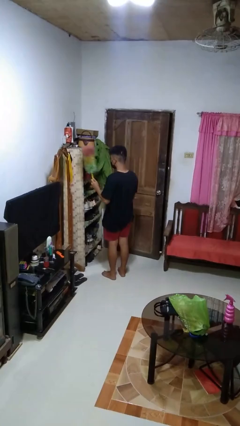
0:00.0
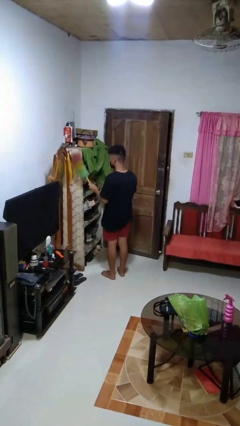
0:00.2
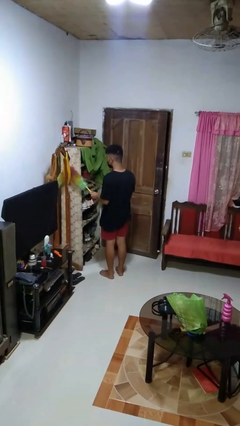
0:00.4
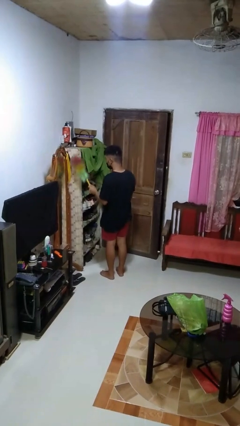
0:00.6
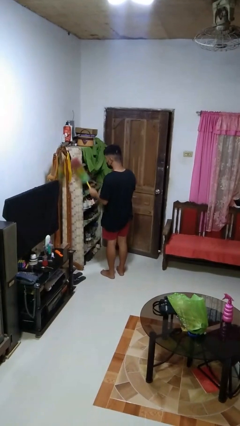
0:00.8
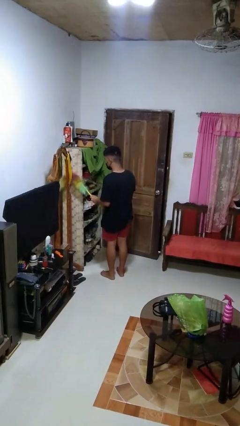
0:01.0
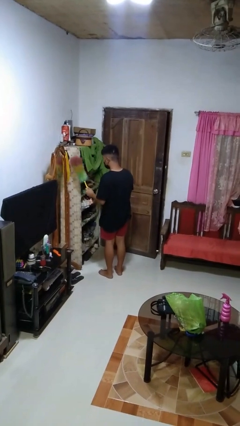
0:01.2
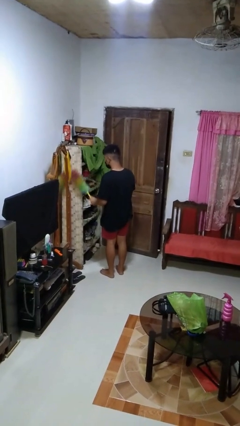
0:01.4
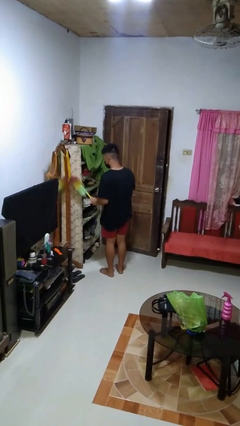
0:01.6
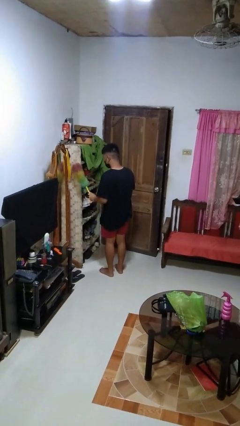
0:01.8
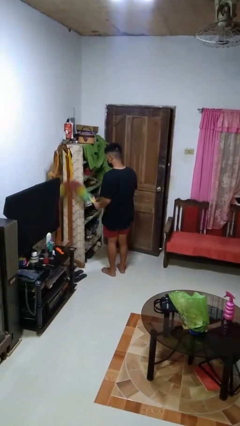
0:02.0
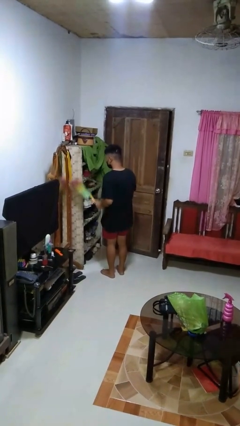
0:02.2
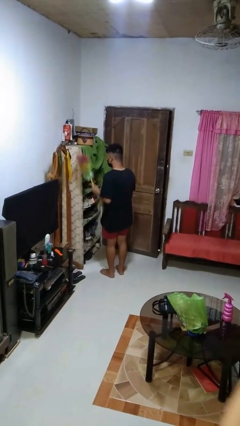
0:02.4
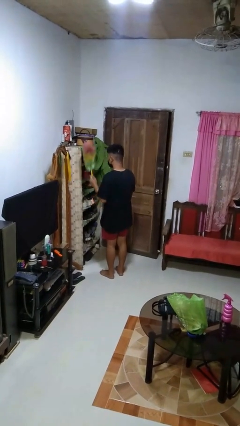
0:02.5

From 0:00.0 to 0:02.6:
person dusts furniture

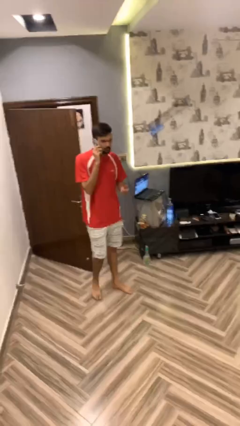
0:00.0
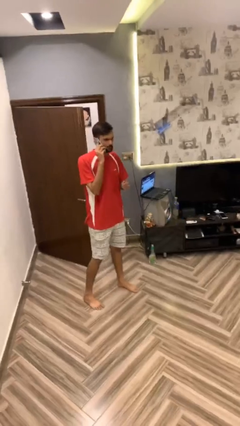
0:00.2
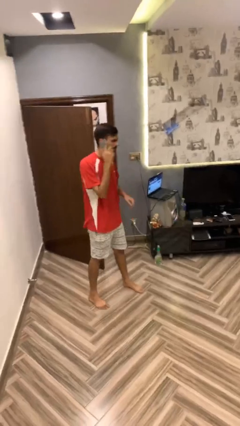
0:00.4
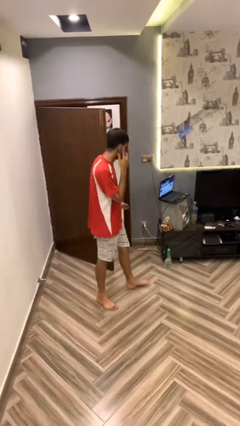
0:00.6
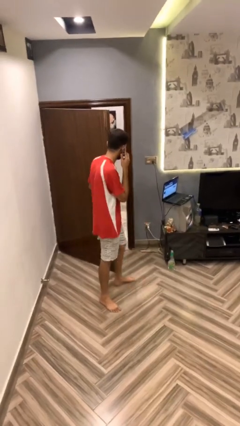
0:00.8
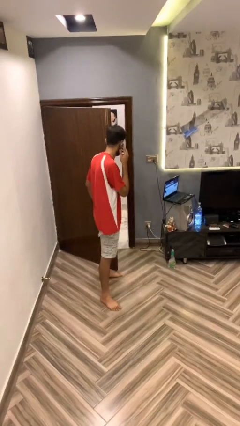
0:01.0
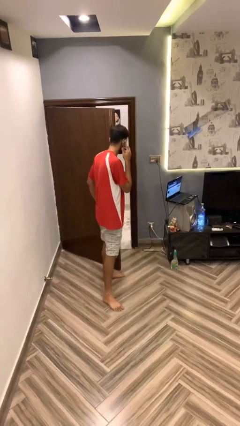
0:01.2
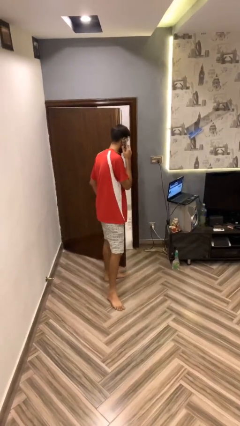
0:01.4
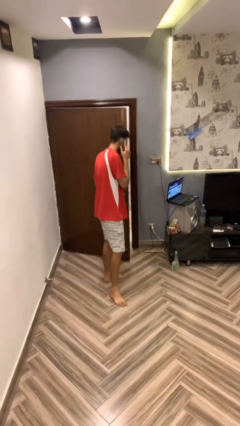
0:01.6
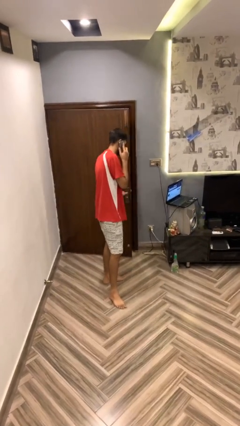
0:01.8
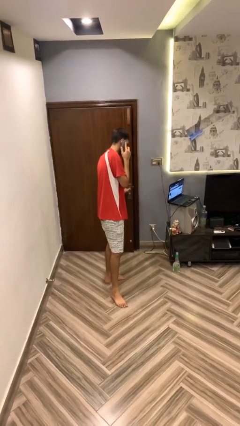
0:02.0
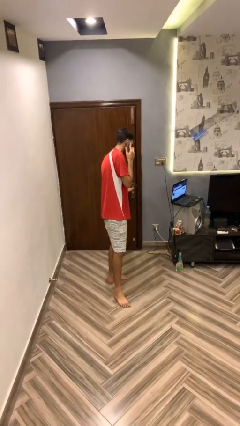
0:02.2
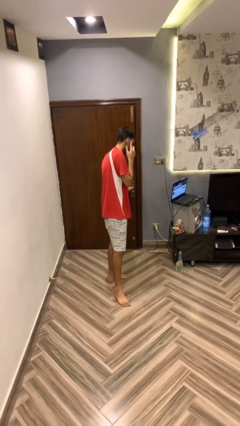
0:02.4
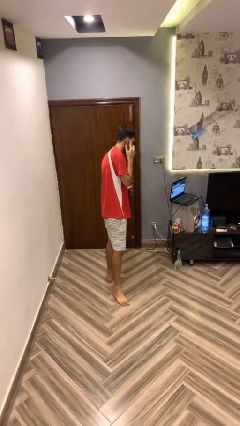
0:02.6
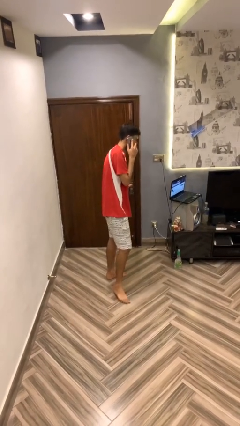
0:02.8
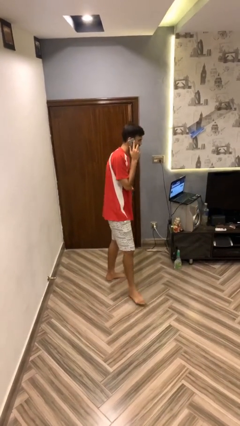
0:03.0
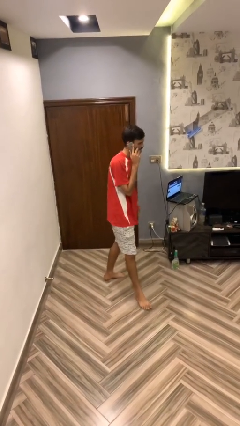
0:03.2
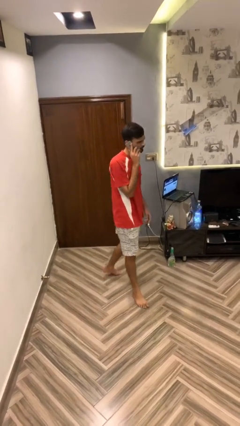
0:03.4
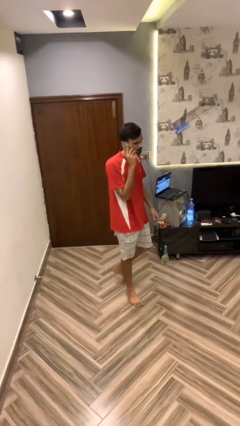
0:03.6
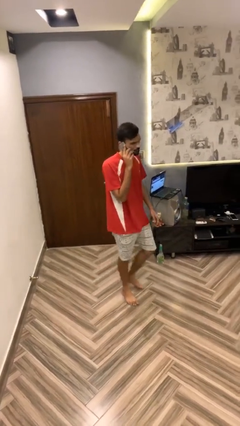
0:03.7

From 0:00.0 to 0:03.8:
person closes facility door

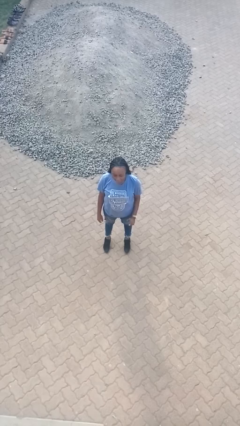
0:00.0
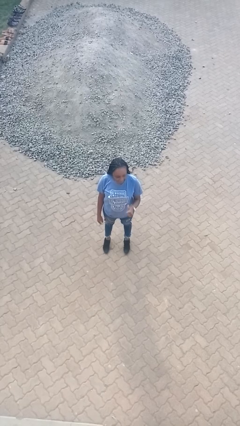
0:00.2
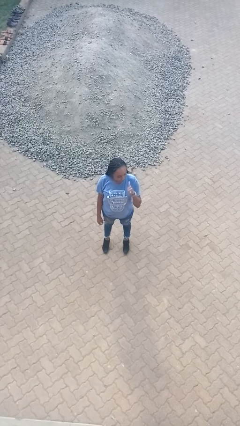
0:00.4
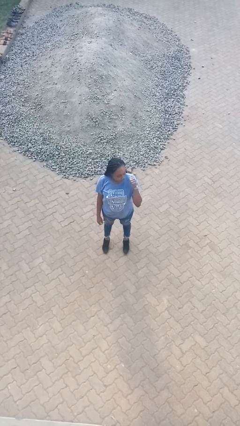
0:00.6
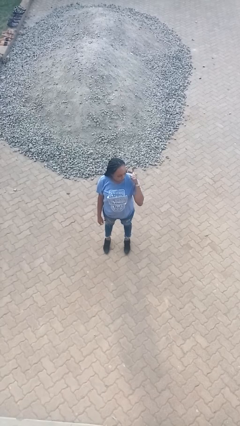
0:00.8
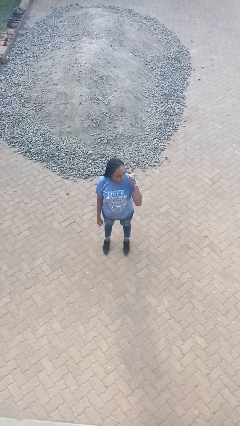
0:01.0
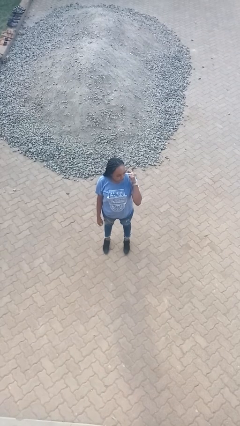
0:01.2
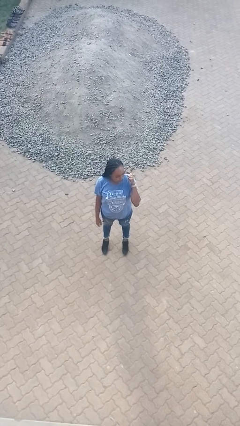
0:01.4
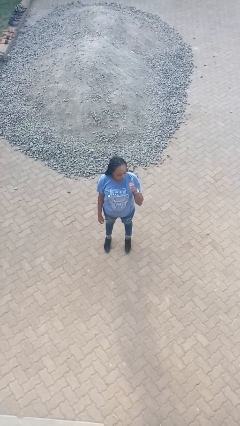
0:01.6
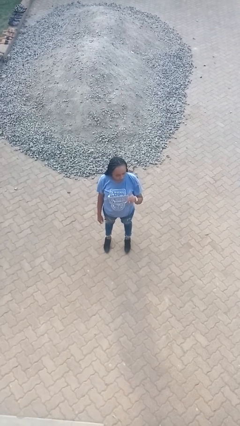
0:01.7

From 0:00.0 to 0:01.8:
person gestures behind me

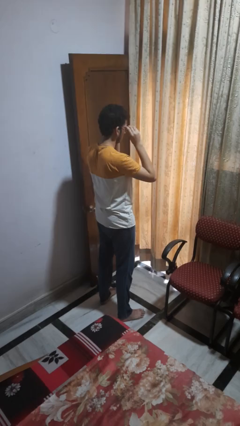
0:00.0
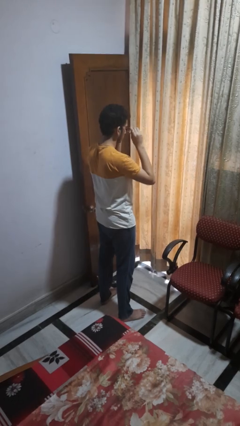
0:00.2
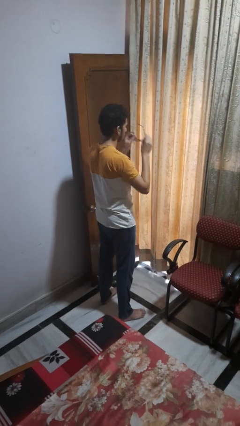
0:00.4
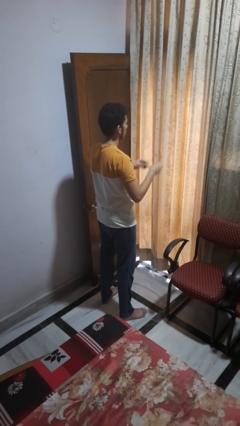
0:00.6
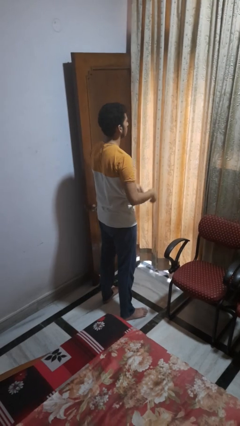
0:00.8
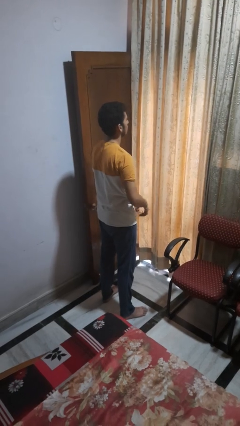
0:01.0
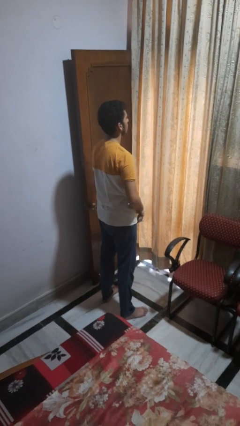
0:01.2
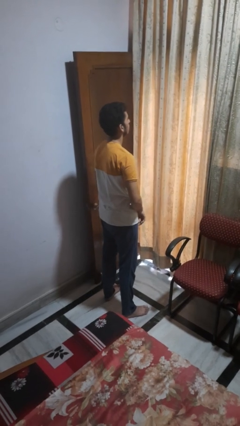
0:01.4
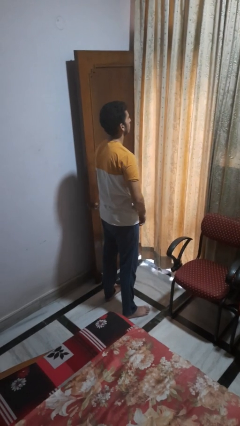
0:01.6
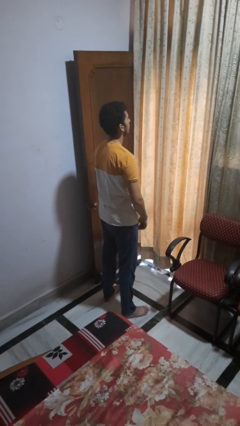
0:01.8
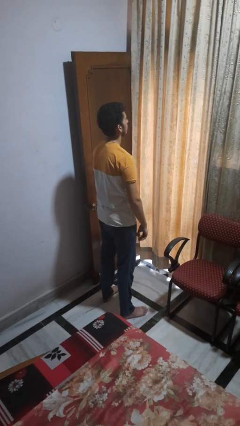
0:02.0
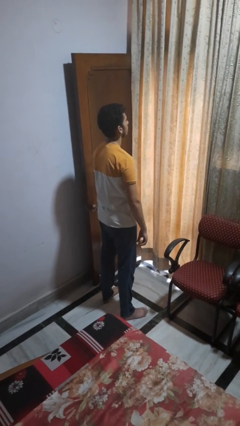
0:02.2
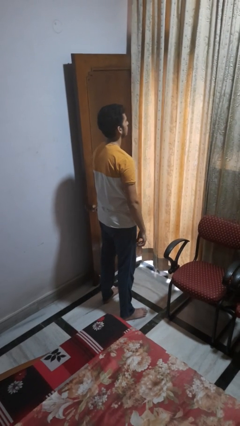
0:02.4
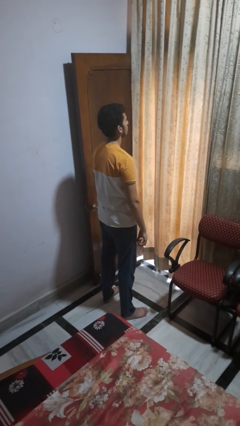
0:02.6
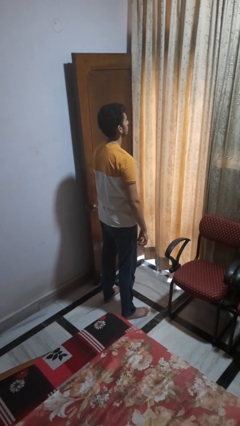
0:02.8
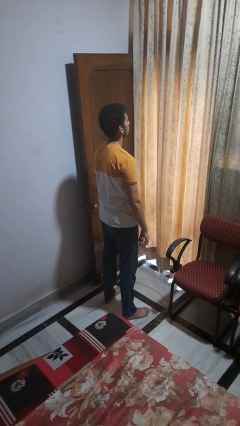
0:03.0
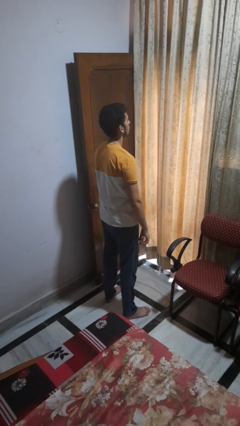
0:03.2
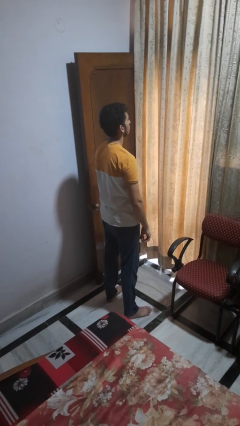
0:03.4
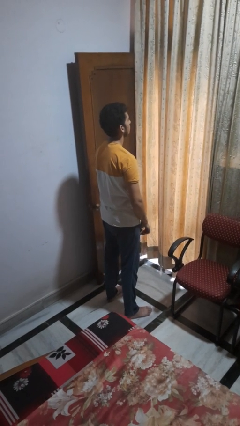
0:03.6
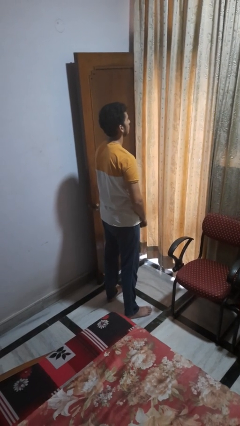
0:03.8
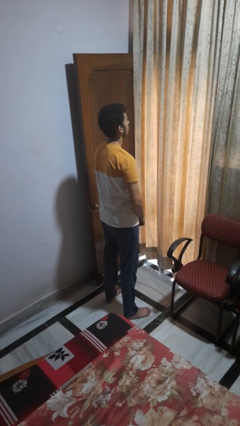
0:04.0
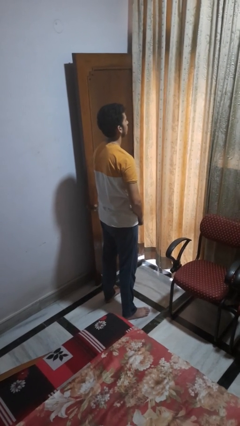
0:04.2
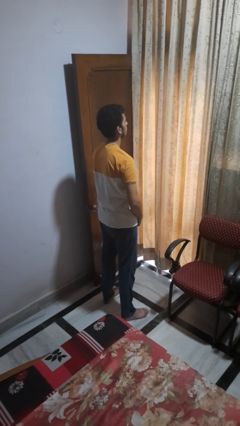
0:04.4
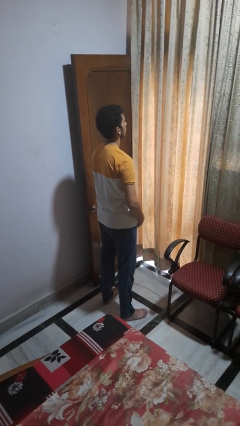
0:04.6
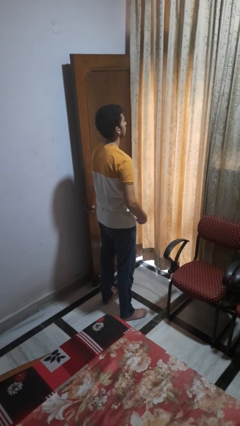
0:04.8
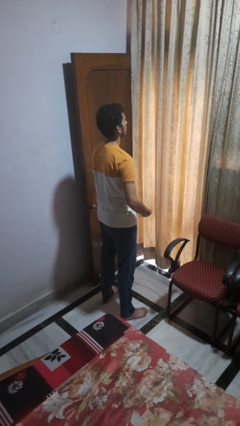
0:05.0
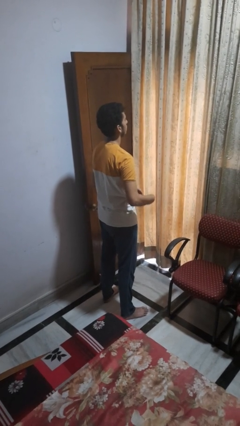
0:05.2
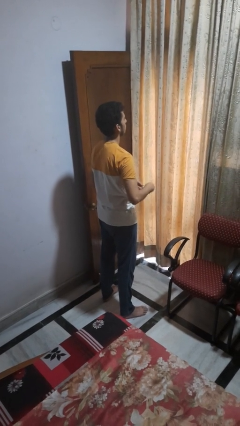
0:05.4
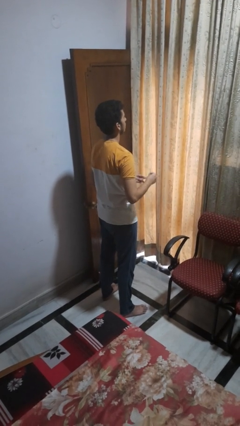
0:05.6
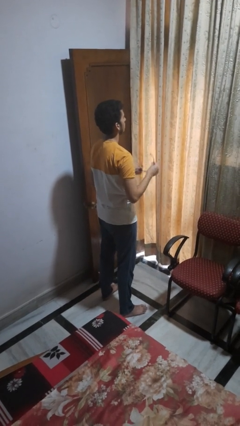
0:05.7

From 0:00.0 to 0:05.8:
person takes off glasses

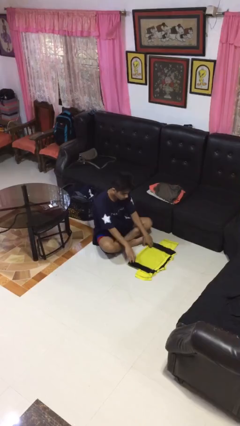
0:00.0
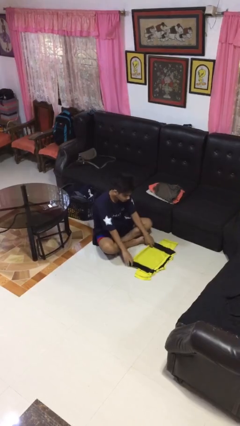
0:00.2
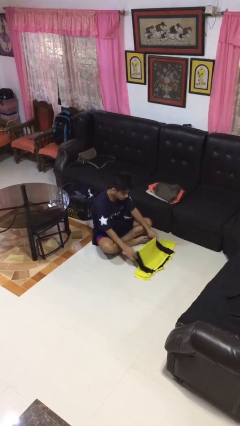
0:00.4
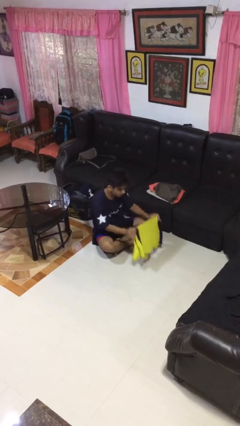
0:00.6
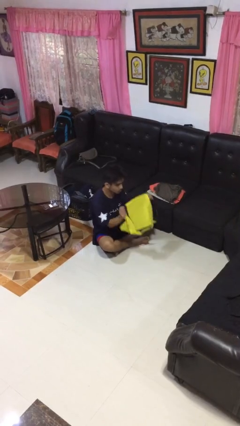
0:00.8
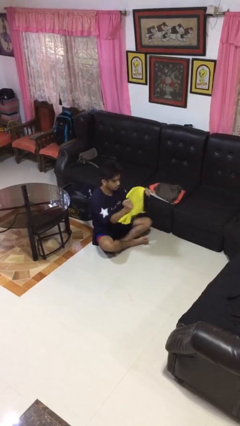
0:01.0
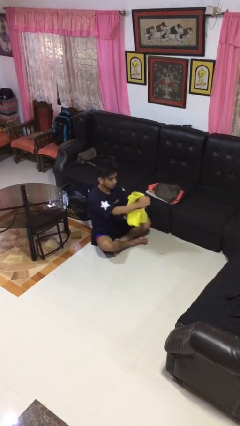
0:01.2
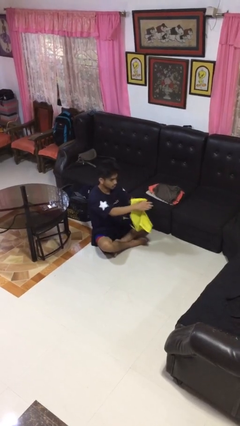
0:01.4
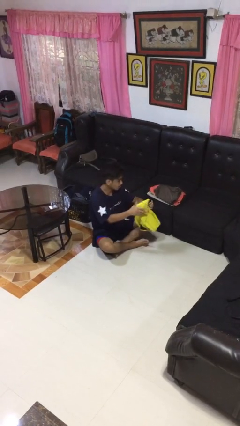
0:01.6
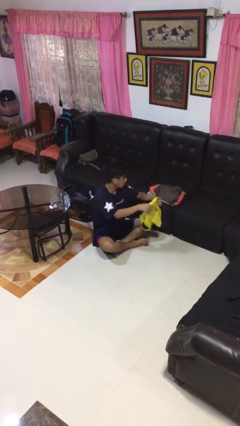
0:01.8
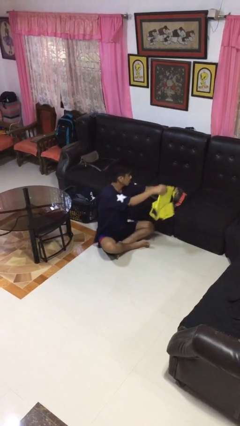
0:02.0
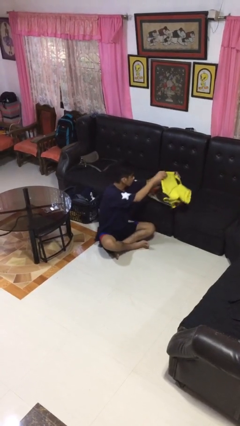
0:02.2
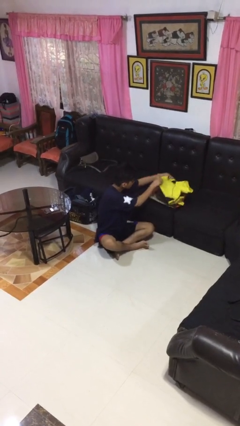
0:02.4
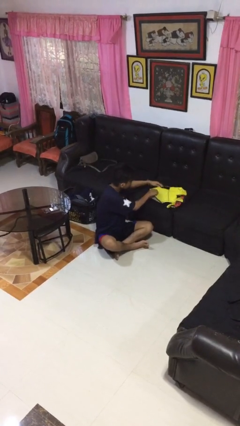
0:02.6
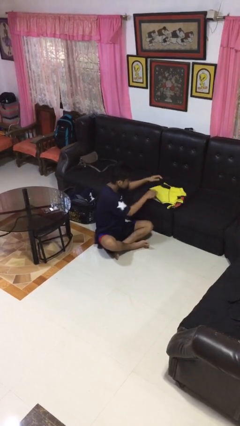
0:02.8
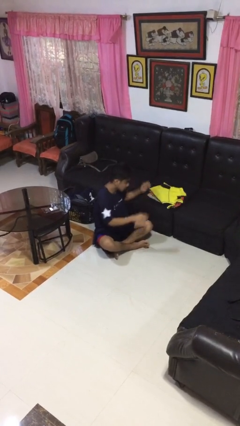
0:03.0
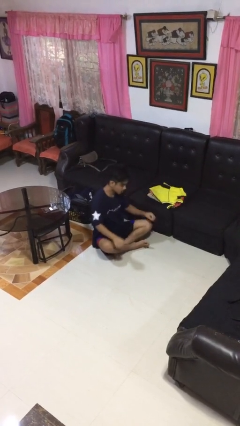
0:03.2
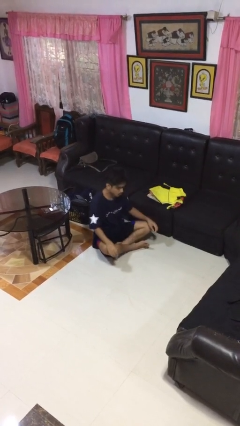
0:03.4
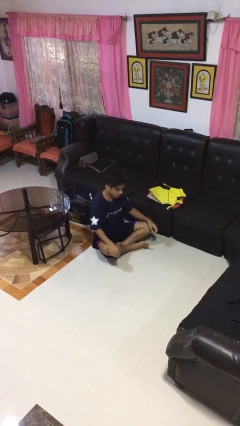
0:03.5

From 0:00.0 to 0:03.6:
person folds shirt

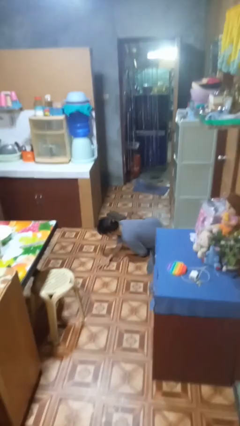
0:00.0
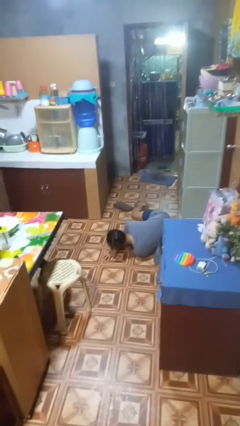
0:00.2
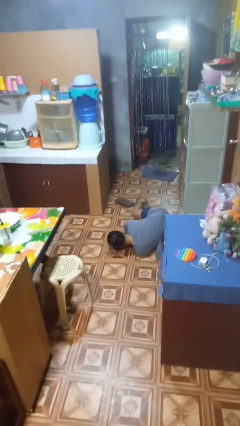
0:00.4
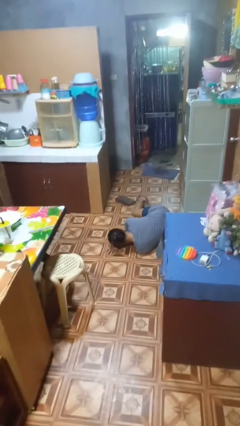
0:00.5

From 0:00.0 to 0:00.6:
person trips on object on floor
